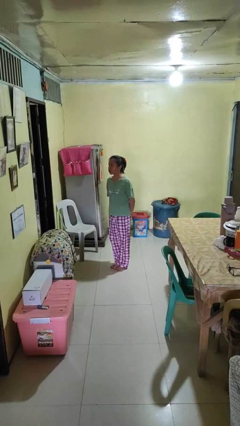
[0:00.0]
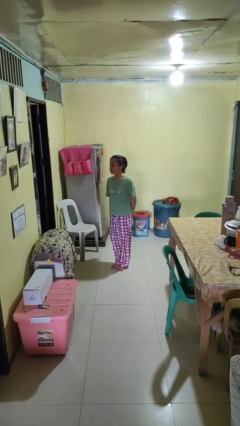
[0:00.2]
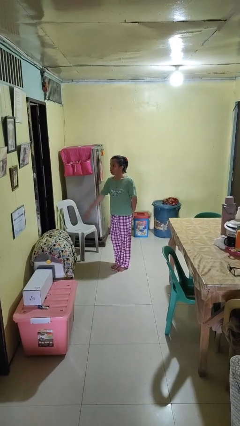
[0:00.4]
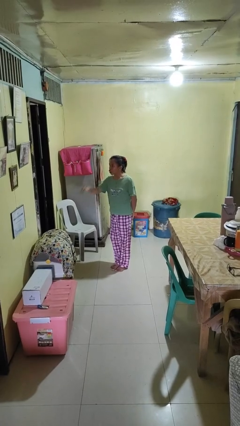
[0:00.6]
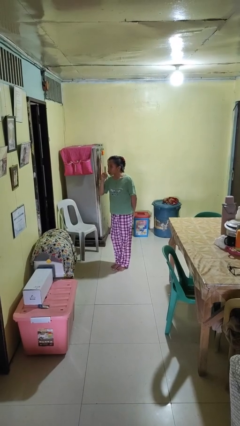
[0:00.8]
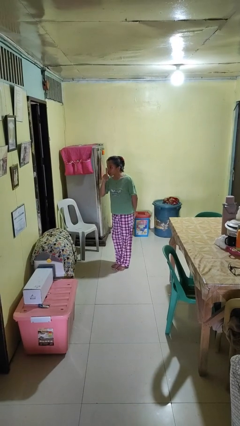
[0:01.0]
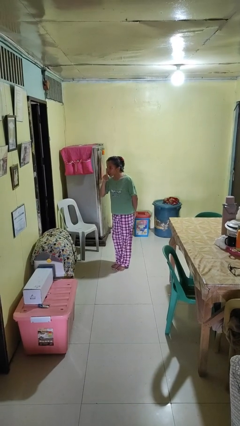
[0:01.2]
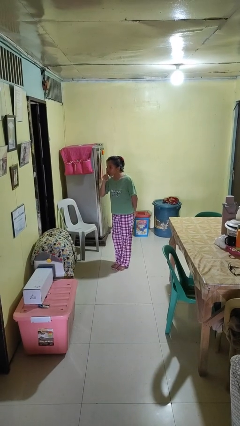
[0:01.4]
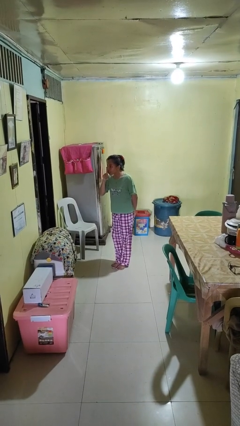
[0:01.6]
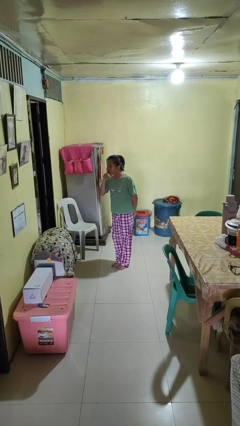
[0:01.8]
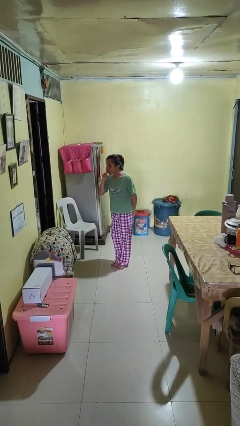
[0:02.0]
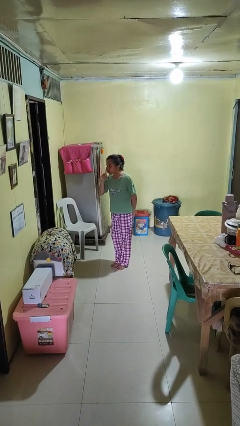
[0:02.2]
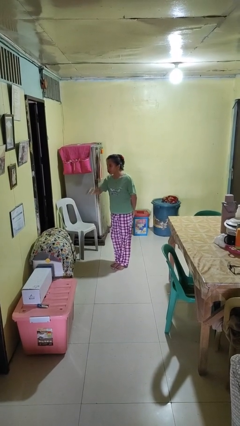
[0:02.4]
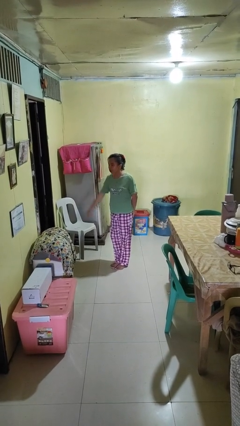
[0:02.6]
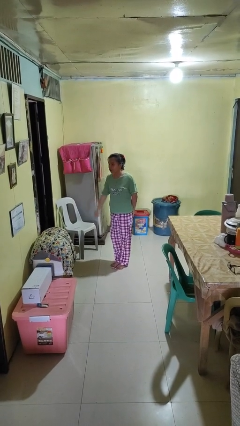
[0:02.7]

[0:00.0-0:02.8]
person gestures be quiet

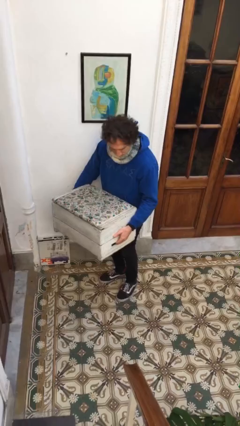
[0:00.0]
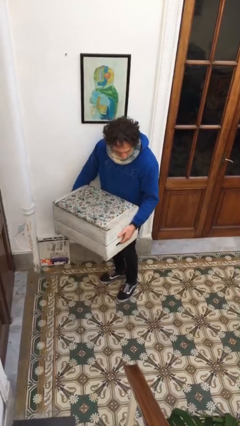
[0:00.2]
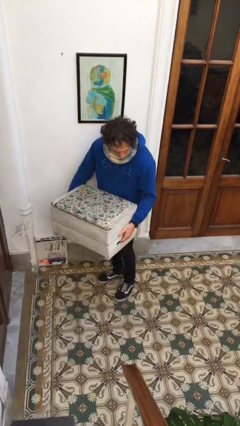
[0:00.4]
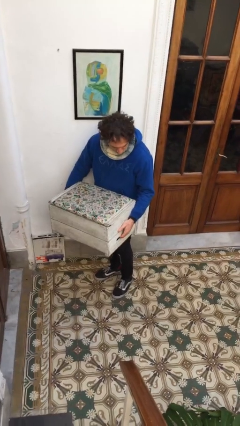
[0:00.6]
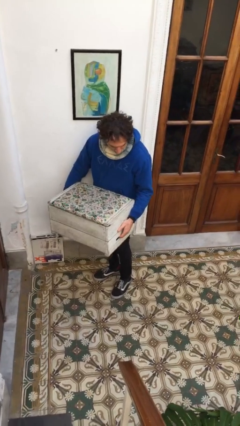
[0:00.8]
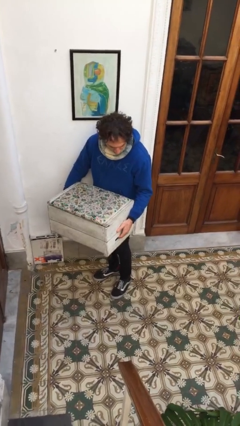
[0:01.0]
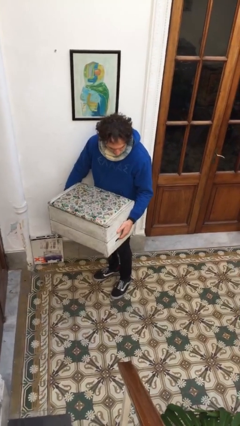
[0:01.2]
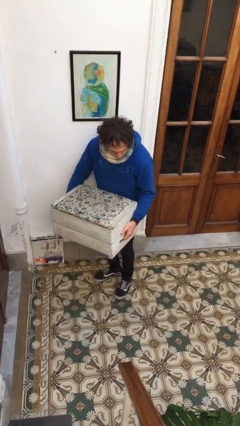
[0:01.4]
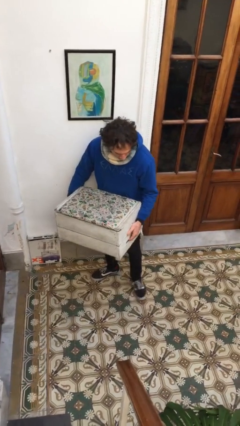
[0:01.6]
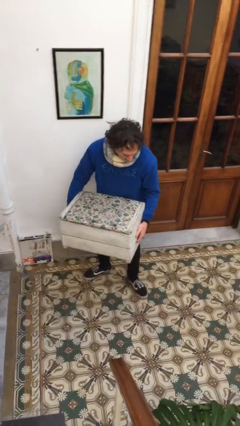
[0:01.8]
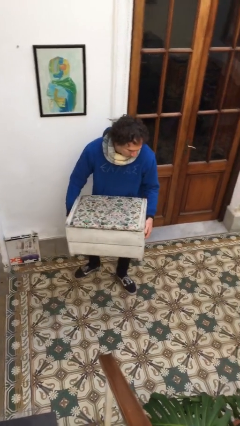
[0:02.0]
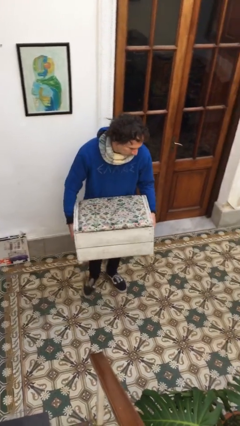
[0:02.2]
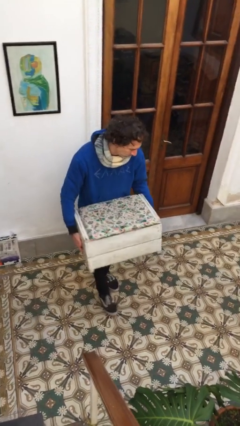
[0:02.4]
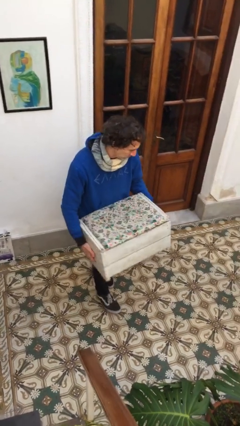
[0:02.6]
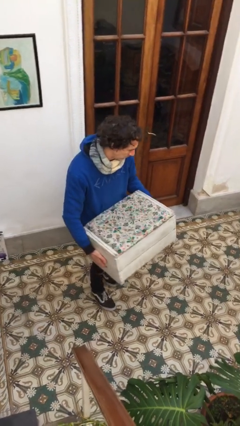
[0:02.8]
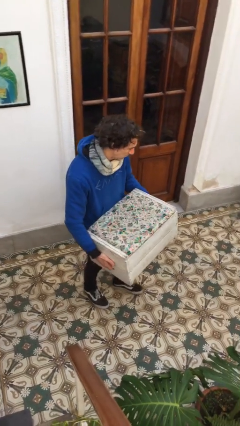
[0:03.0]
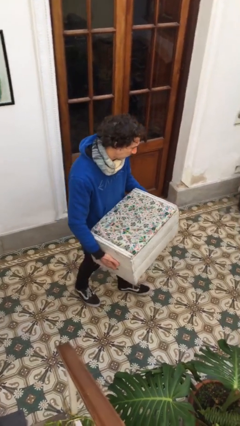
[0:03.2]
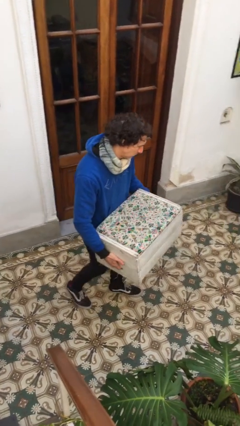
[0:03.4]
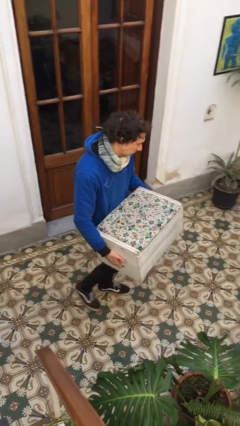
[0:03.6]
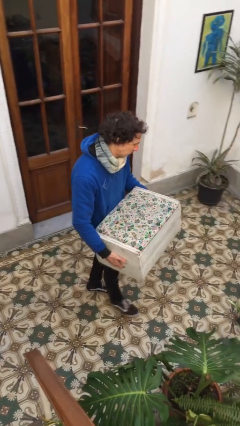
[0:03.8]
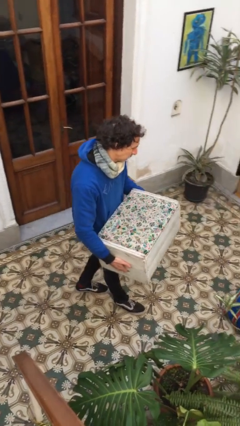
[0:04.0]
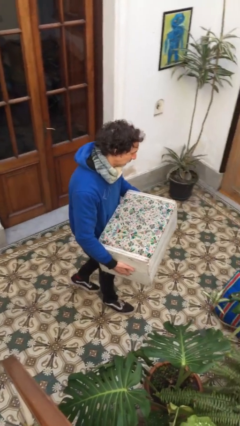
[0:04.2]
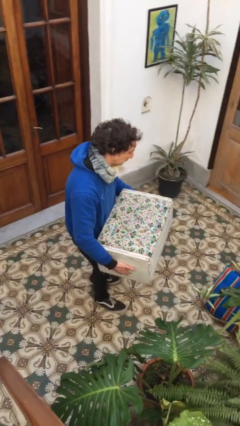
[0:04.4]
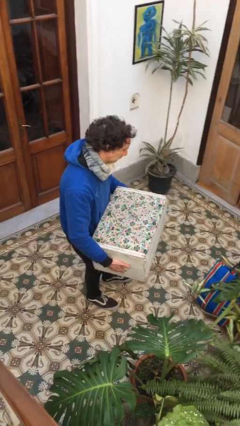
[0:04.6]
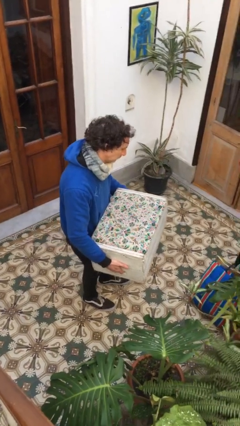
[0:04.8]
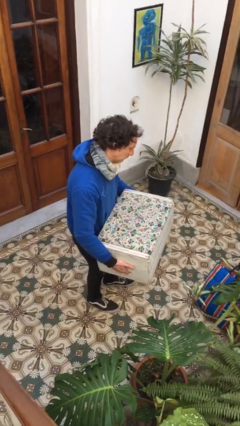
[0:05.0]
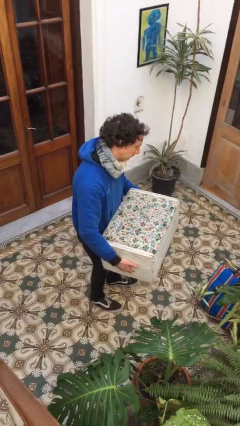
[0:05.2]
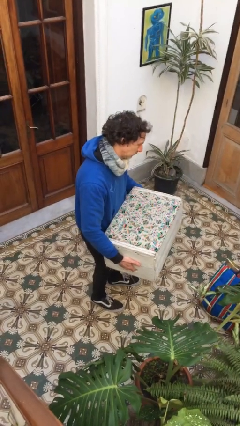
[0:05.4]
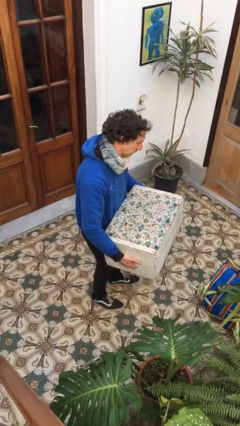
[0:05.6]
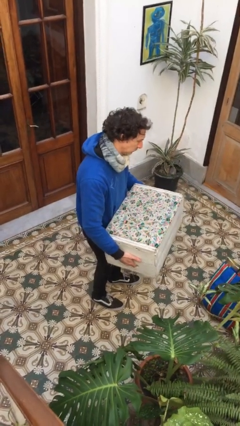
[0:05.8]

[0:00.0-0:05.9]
person carries furniture

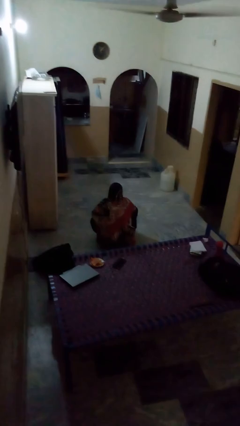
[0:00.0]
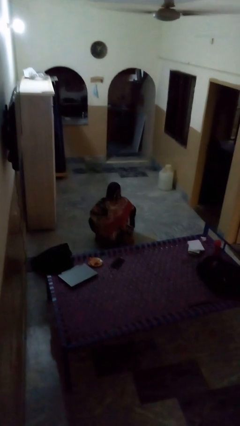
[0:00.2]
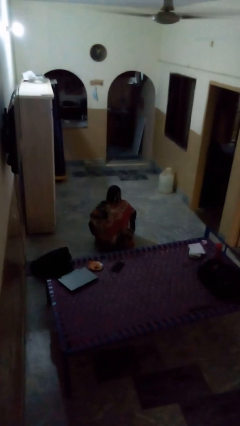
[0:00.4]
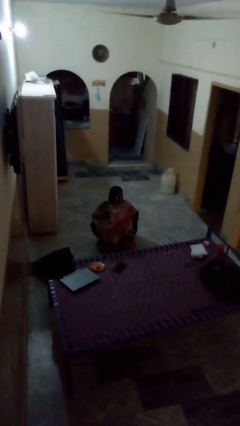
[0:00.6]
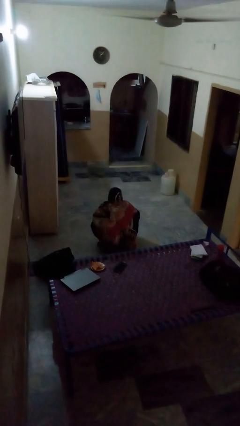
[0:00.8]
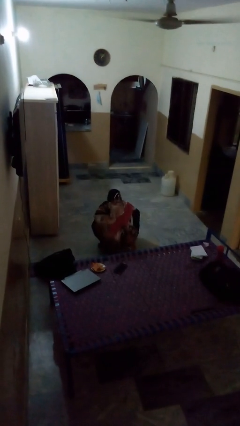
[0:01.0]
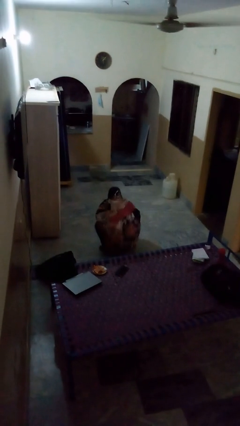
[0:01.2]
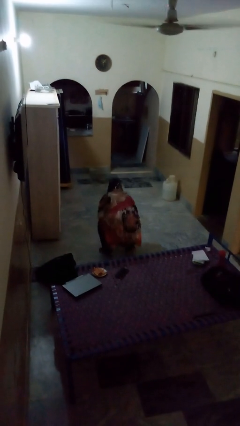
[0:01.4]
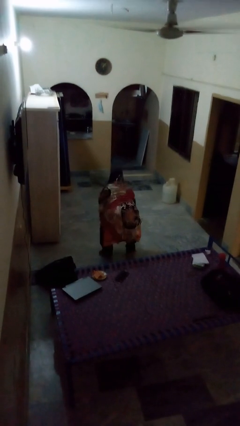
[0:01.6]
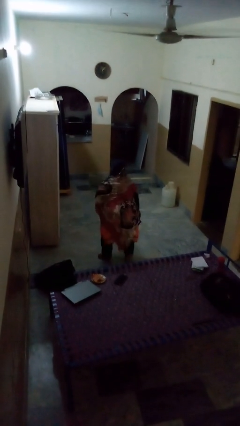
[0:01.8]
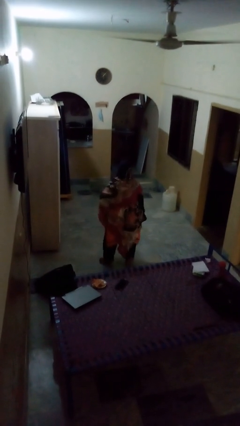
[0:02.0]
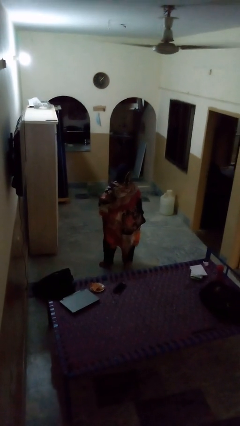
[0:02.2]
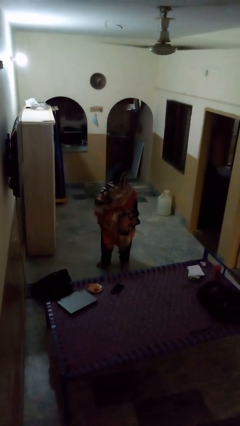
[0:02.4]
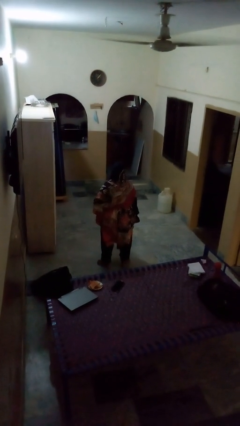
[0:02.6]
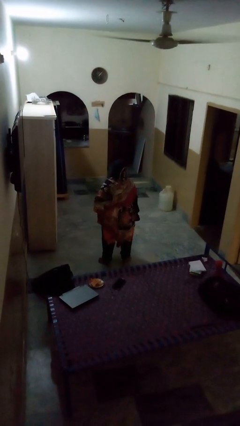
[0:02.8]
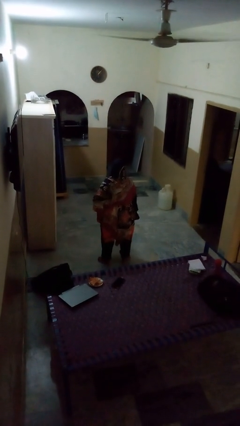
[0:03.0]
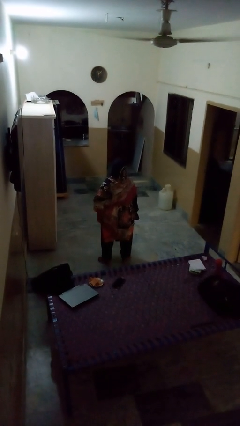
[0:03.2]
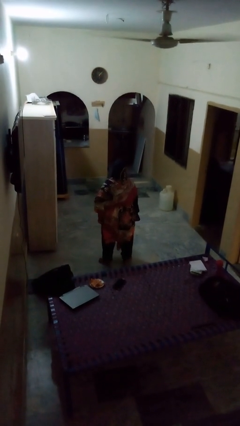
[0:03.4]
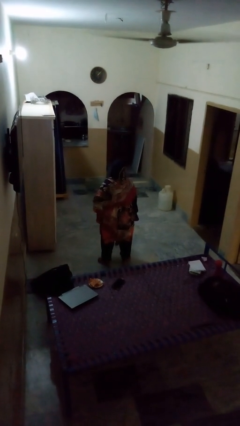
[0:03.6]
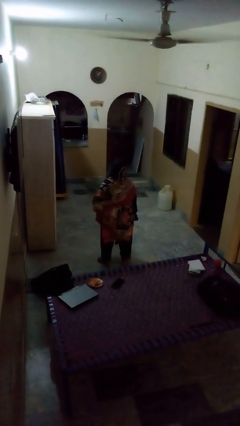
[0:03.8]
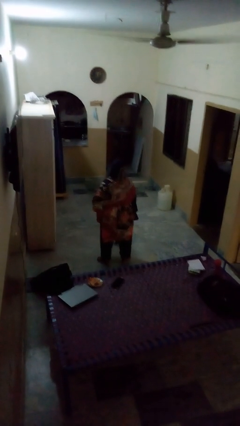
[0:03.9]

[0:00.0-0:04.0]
person stands up

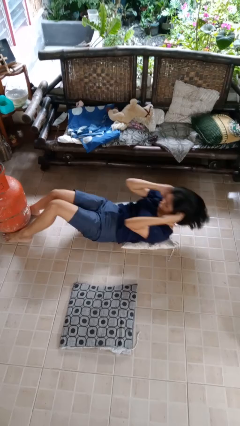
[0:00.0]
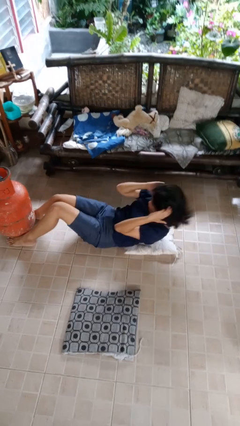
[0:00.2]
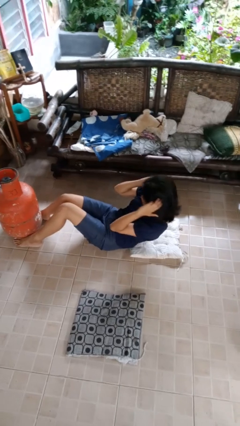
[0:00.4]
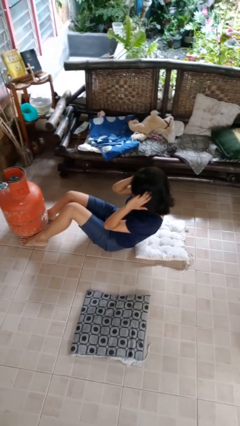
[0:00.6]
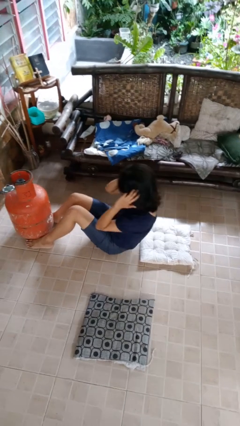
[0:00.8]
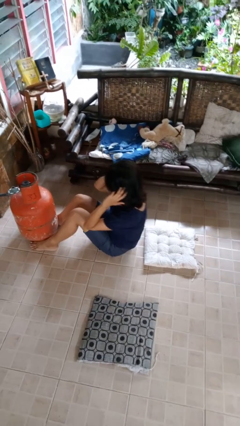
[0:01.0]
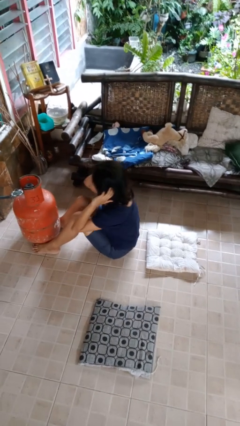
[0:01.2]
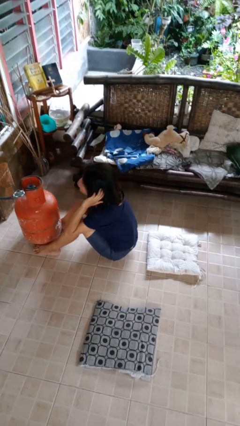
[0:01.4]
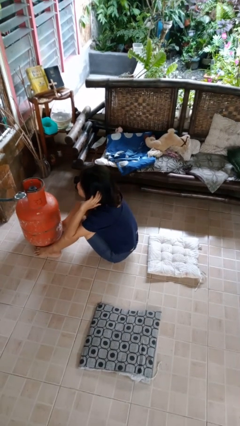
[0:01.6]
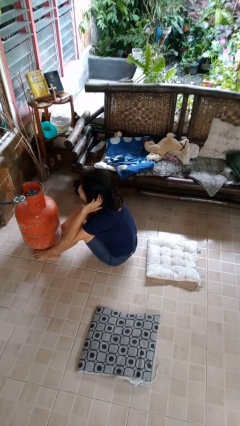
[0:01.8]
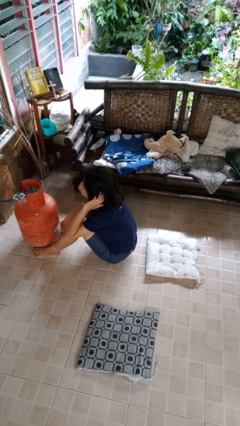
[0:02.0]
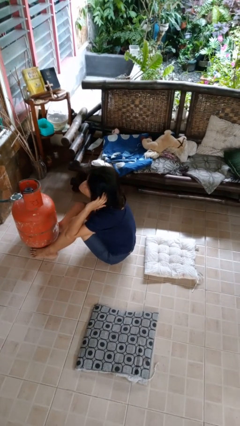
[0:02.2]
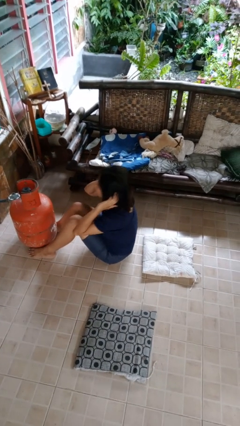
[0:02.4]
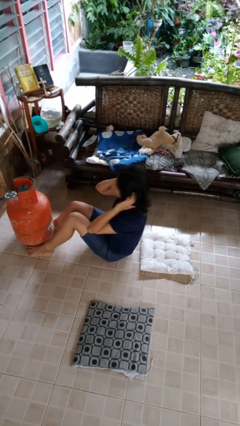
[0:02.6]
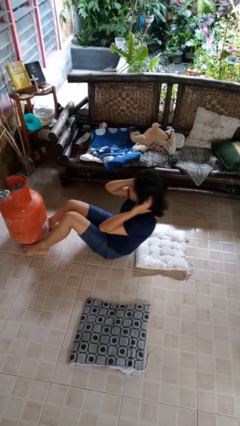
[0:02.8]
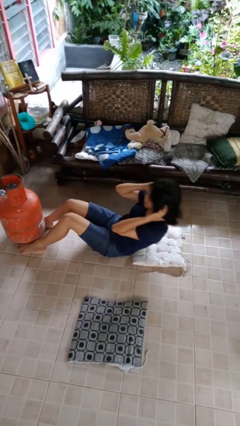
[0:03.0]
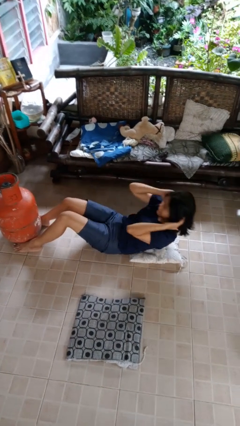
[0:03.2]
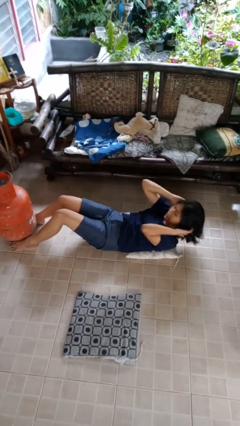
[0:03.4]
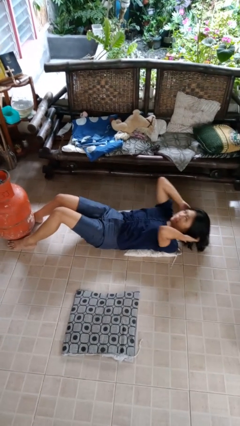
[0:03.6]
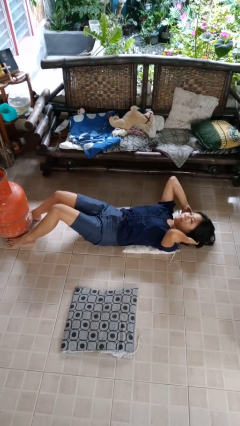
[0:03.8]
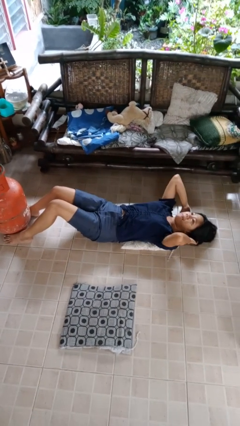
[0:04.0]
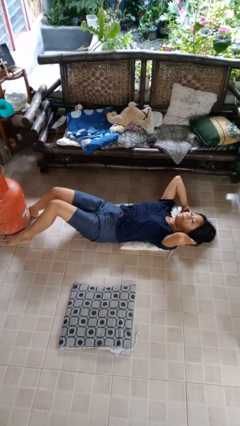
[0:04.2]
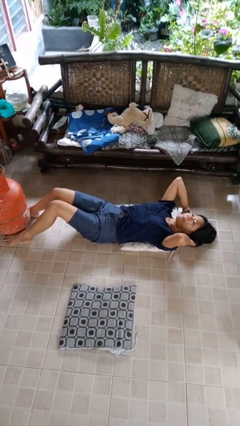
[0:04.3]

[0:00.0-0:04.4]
person exercises with situp

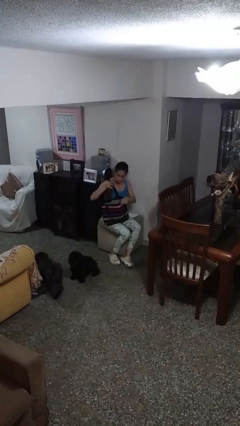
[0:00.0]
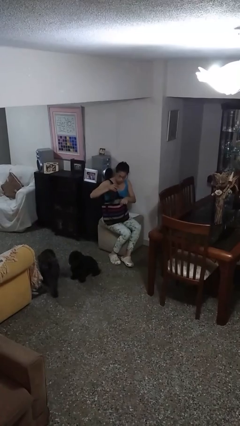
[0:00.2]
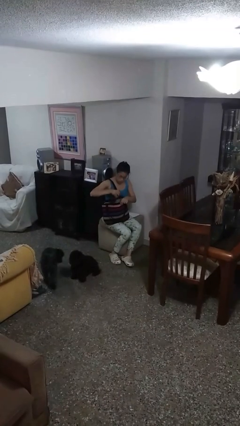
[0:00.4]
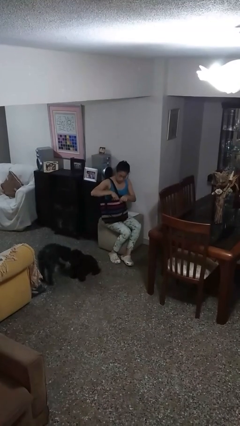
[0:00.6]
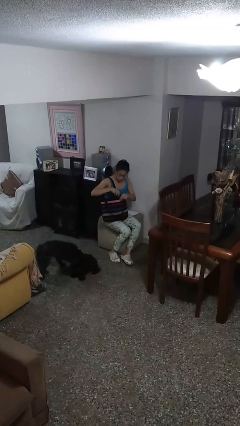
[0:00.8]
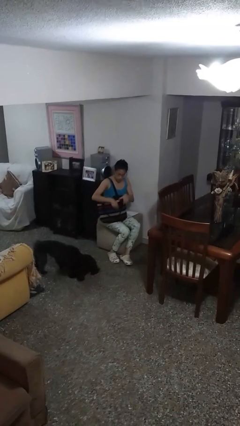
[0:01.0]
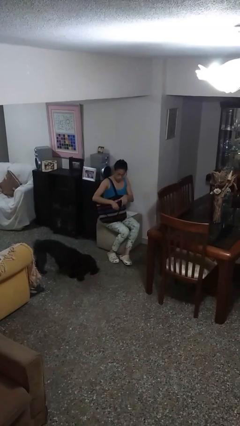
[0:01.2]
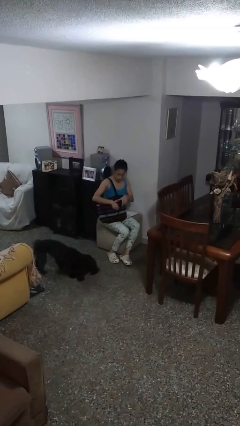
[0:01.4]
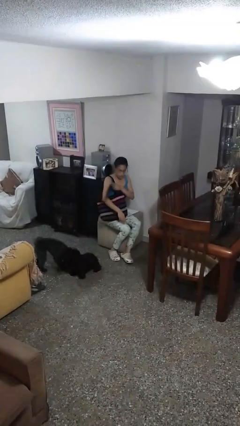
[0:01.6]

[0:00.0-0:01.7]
person puts object into purse
